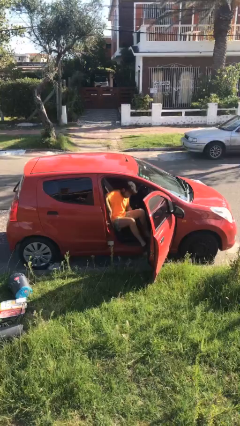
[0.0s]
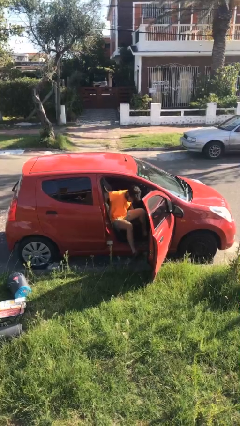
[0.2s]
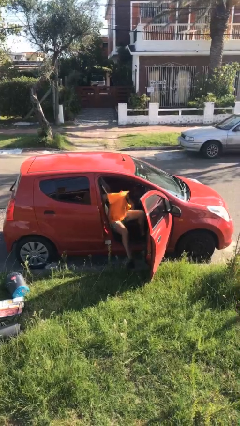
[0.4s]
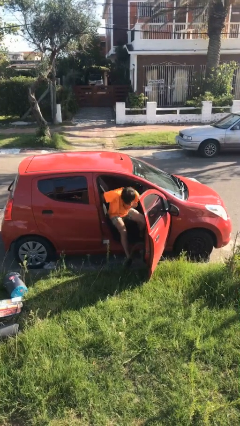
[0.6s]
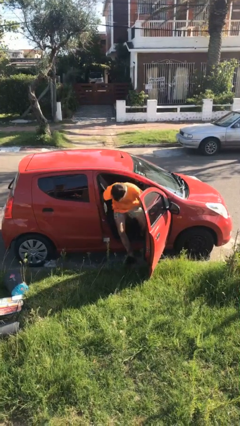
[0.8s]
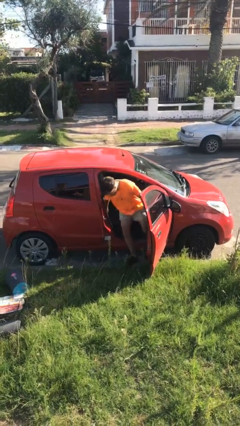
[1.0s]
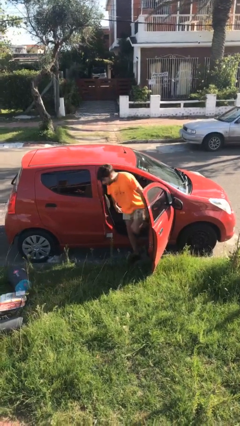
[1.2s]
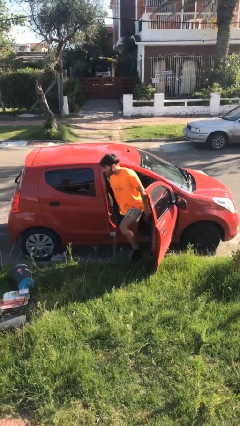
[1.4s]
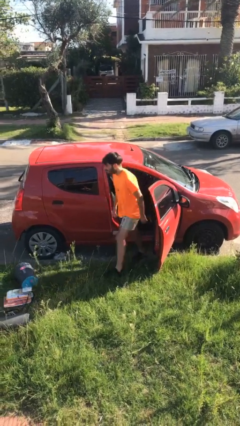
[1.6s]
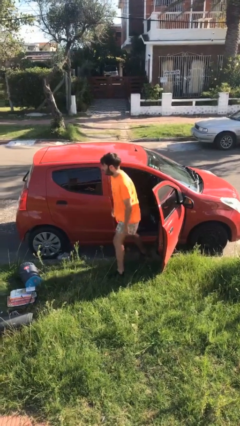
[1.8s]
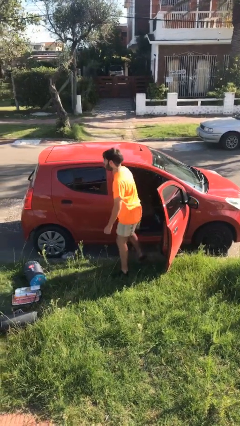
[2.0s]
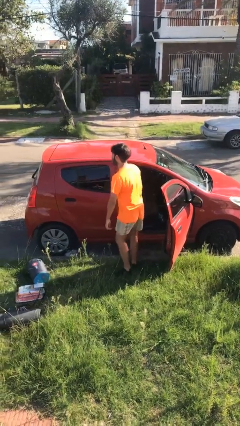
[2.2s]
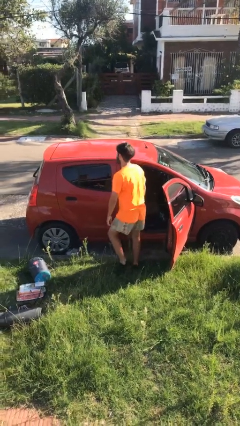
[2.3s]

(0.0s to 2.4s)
person exits car

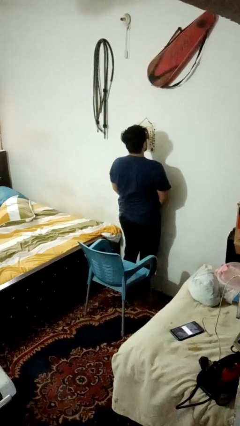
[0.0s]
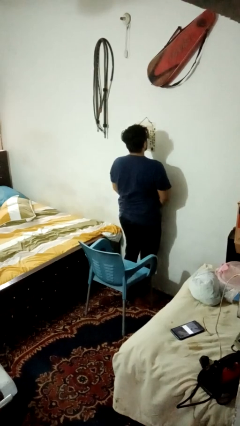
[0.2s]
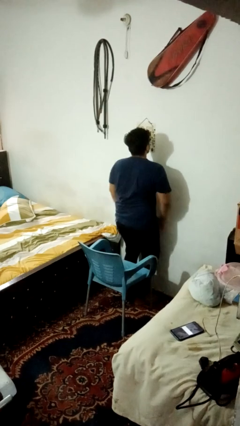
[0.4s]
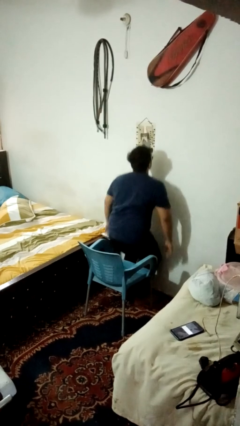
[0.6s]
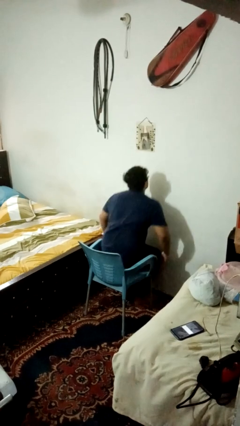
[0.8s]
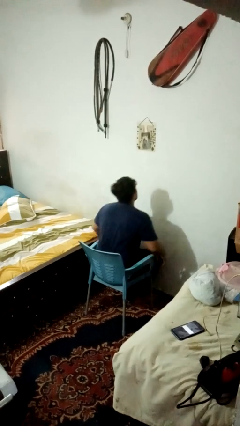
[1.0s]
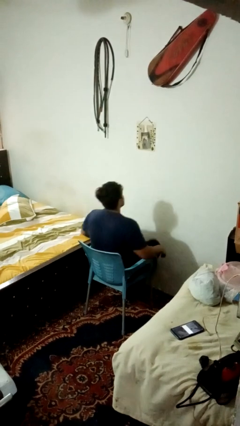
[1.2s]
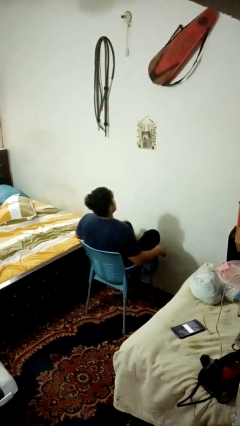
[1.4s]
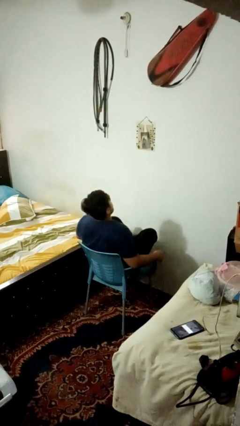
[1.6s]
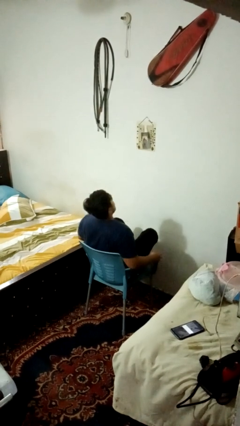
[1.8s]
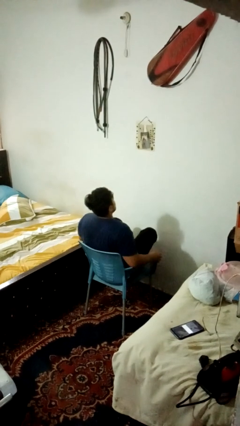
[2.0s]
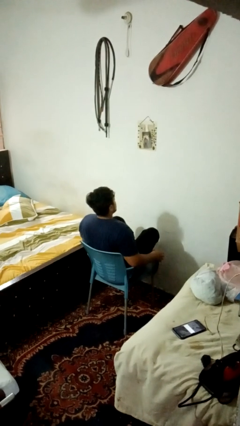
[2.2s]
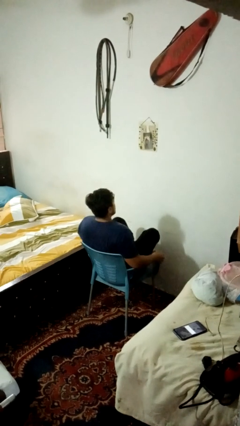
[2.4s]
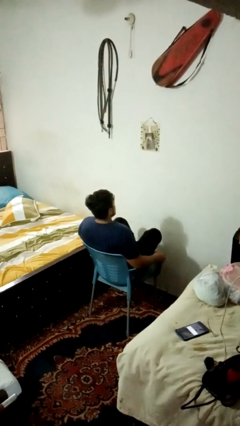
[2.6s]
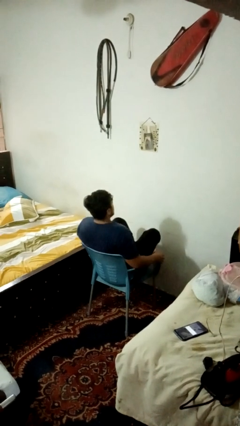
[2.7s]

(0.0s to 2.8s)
person crosses legs

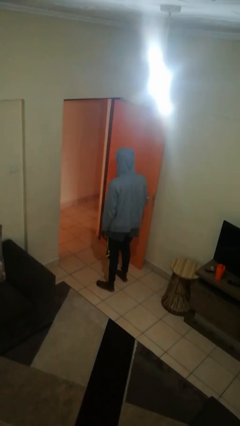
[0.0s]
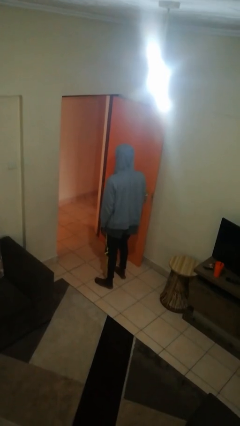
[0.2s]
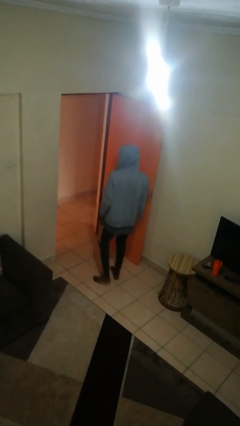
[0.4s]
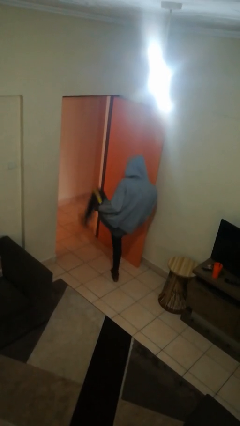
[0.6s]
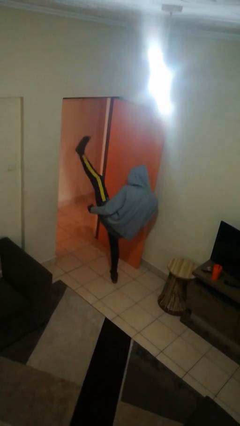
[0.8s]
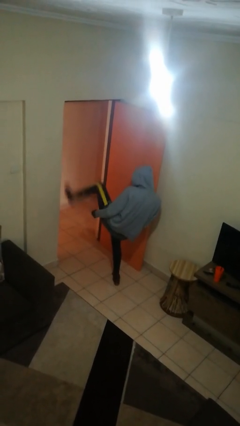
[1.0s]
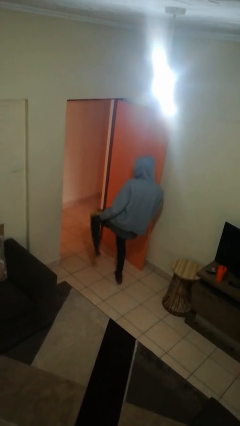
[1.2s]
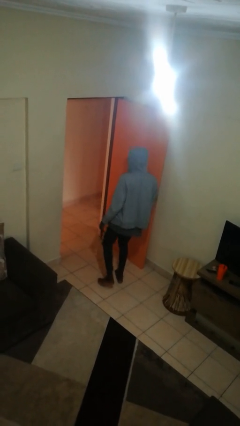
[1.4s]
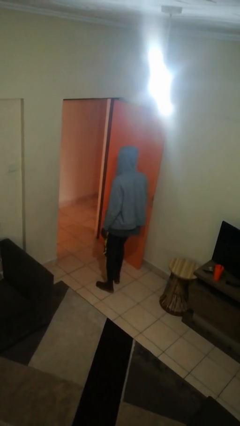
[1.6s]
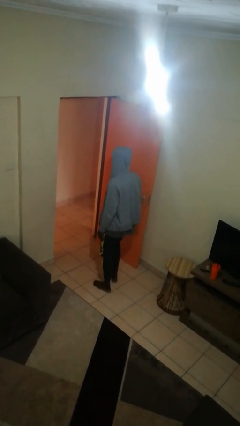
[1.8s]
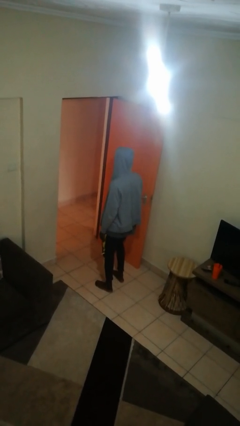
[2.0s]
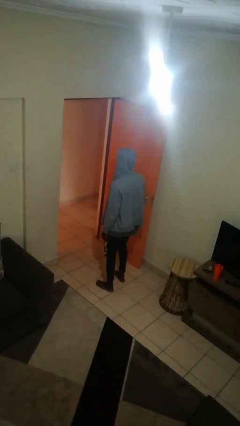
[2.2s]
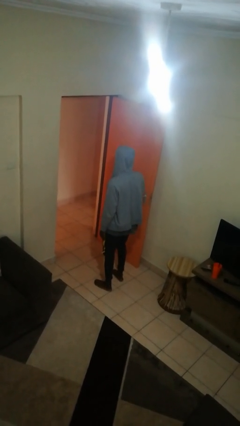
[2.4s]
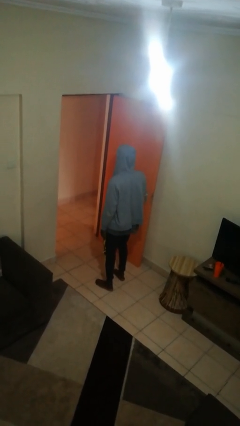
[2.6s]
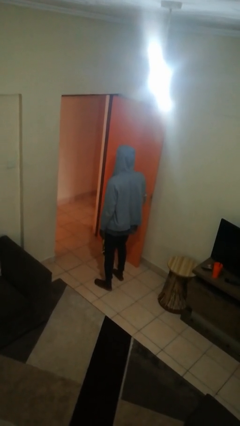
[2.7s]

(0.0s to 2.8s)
person karate kicks

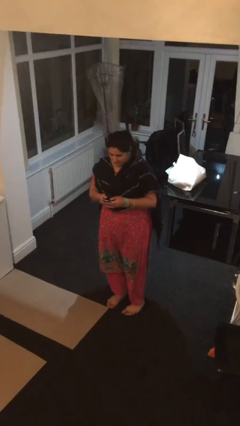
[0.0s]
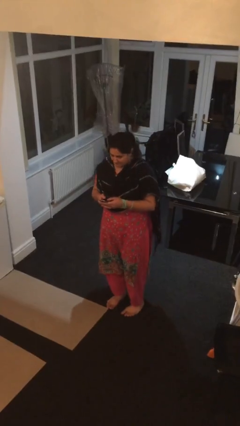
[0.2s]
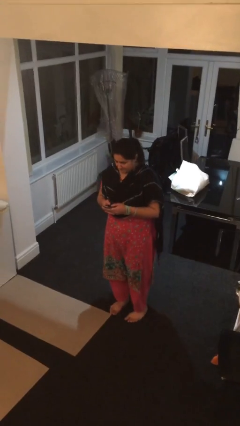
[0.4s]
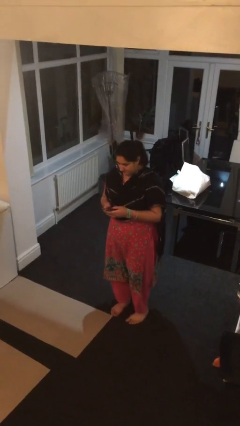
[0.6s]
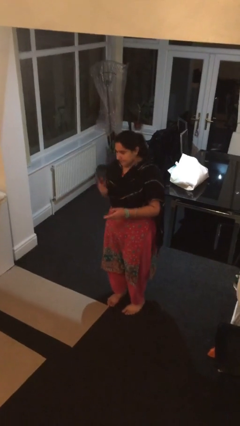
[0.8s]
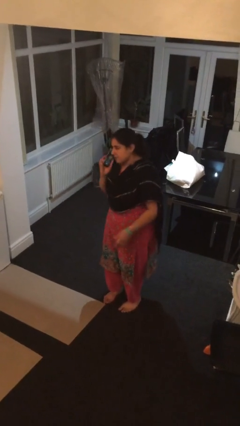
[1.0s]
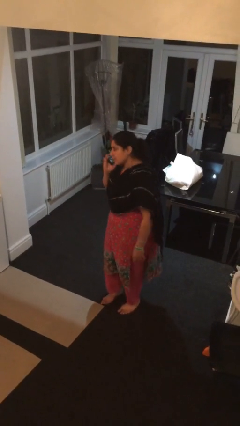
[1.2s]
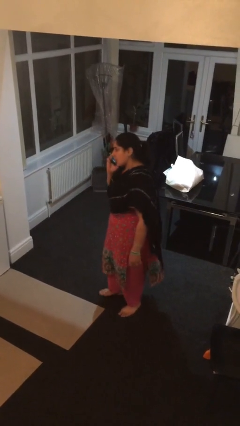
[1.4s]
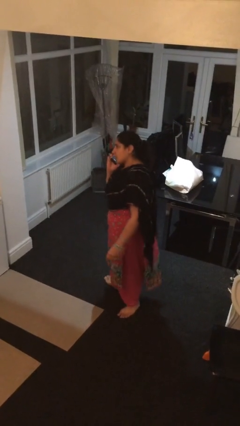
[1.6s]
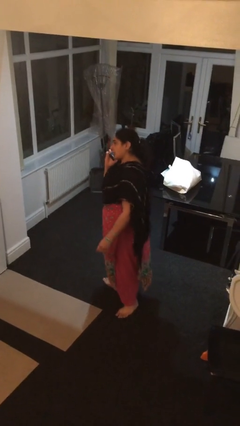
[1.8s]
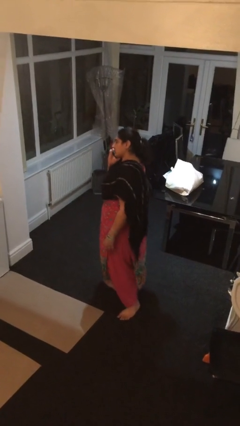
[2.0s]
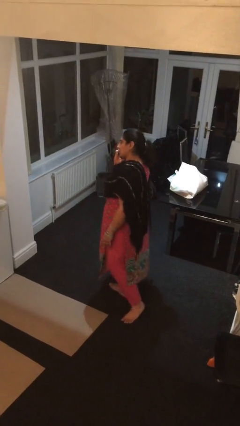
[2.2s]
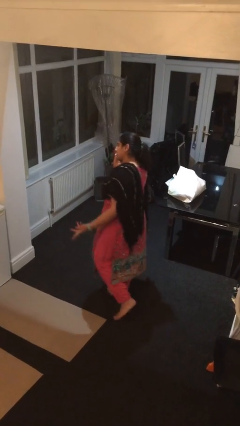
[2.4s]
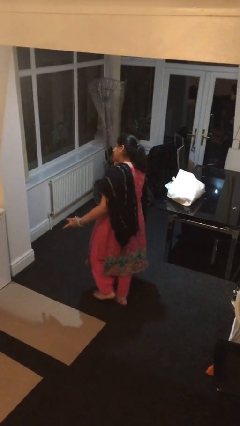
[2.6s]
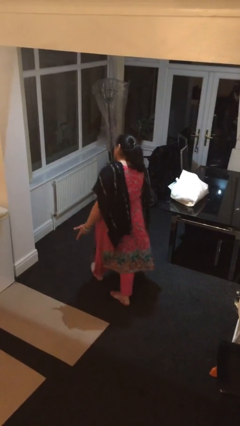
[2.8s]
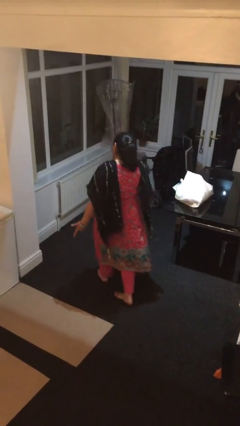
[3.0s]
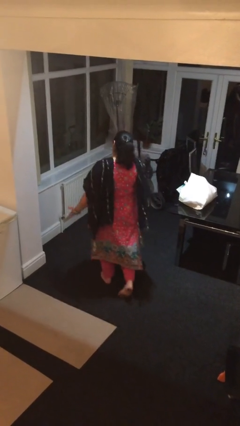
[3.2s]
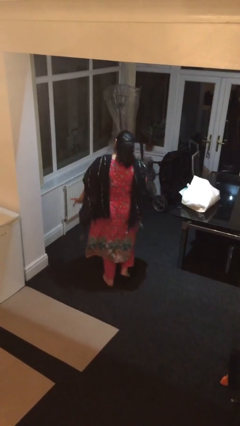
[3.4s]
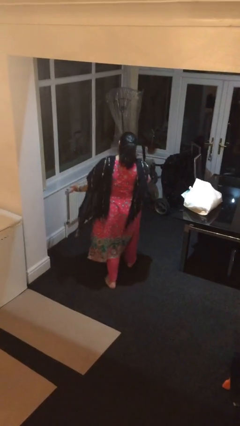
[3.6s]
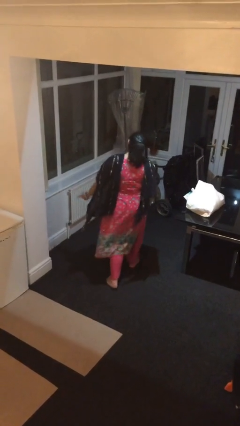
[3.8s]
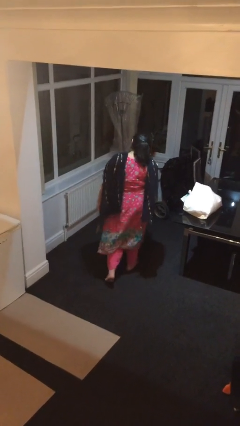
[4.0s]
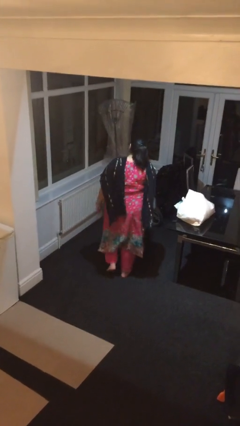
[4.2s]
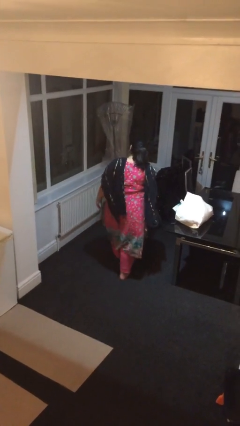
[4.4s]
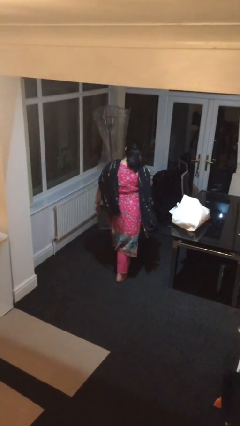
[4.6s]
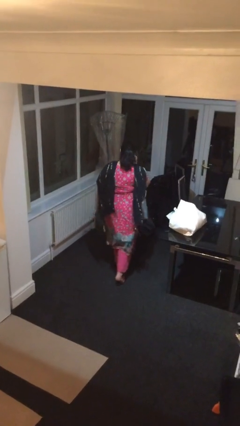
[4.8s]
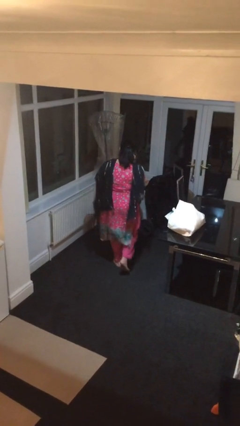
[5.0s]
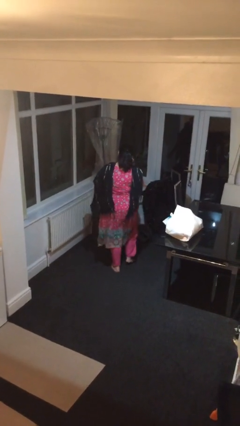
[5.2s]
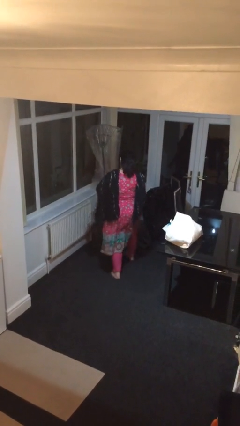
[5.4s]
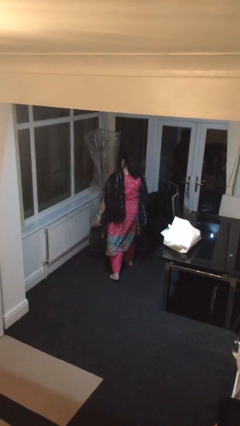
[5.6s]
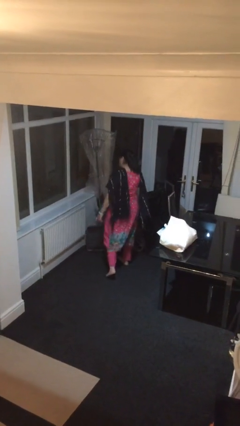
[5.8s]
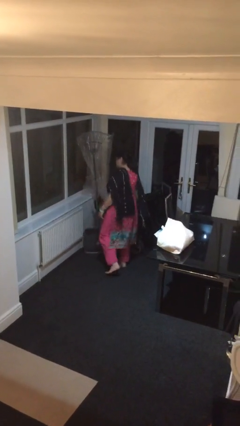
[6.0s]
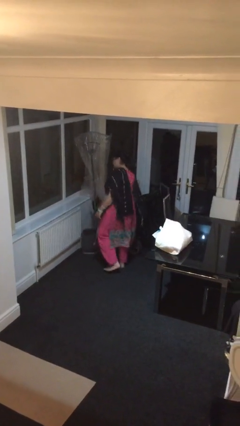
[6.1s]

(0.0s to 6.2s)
person talks on phone

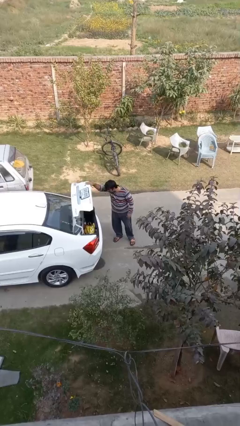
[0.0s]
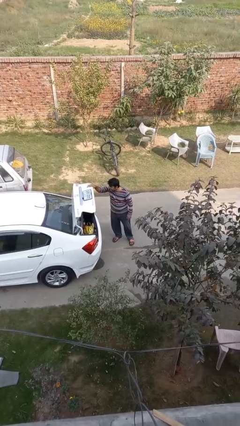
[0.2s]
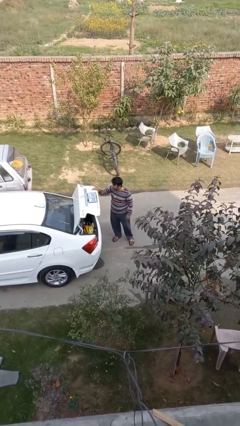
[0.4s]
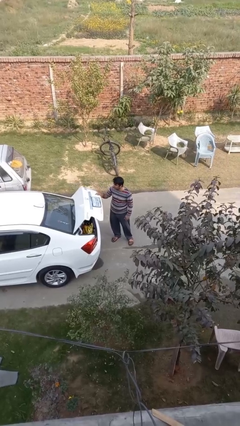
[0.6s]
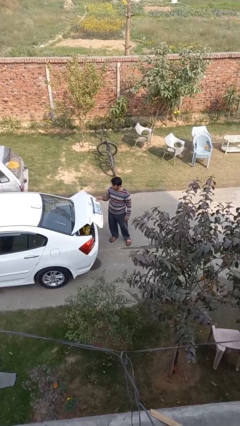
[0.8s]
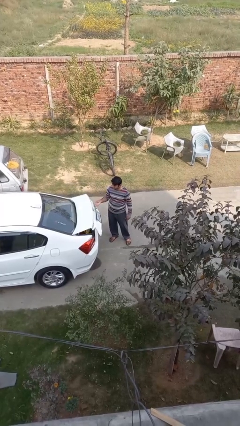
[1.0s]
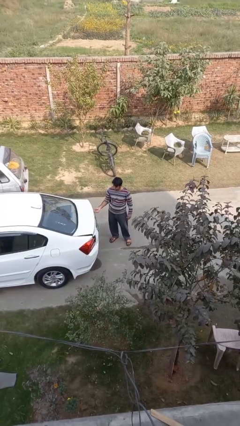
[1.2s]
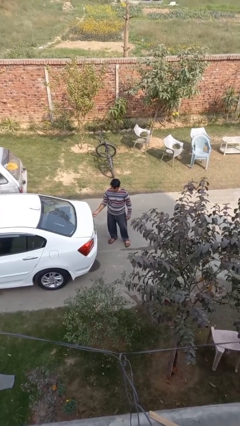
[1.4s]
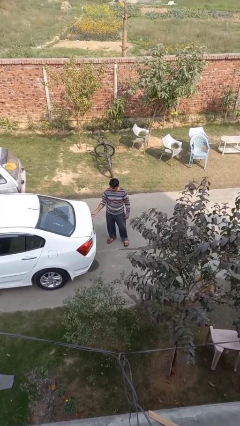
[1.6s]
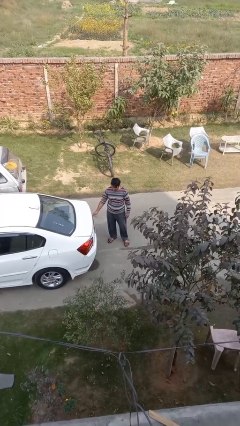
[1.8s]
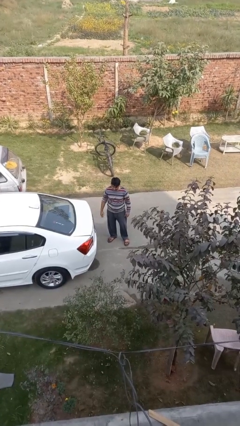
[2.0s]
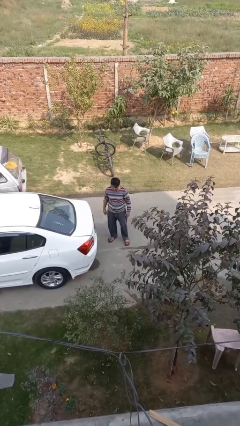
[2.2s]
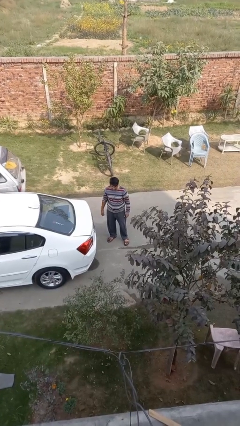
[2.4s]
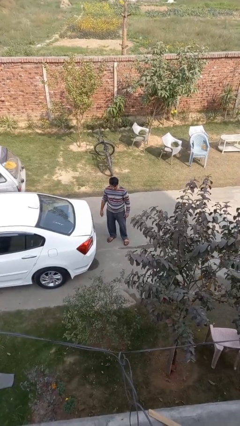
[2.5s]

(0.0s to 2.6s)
person closes car trunk

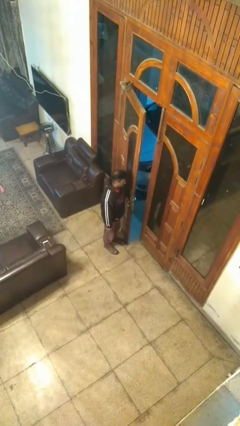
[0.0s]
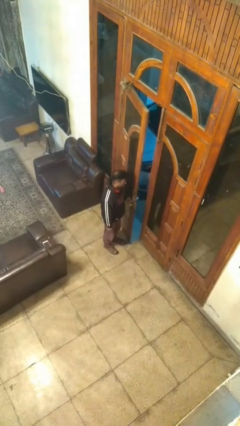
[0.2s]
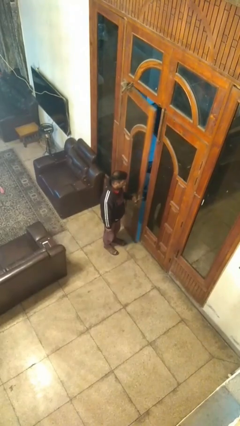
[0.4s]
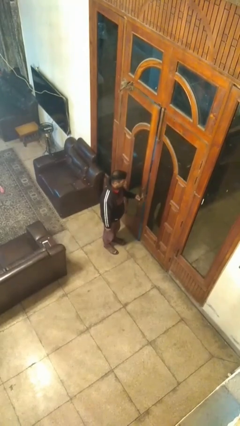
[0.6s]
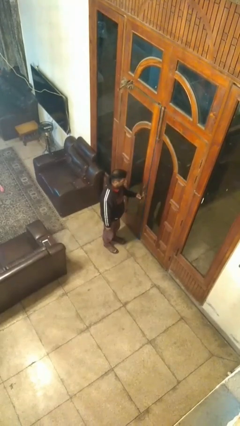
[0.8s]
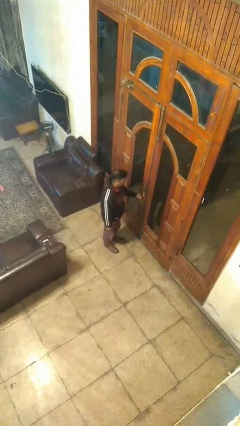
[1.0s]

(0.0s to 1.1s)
person closes facility door
